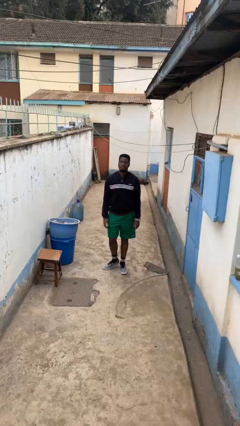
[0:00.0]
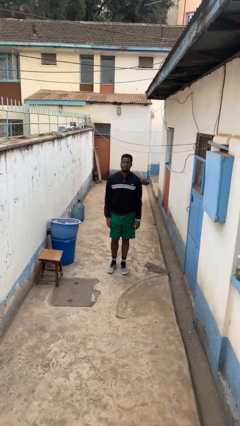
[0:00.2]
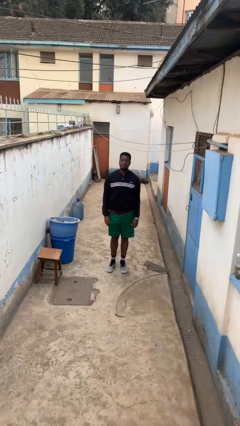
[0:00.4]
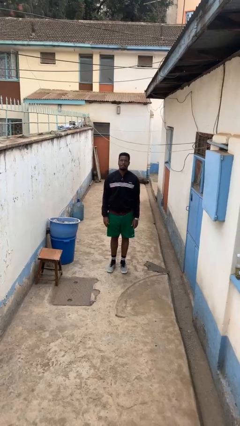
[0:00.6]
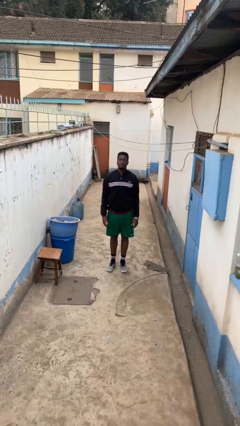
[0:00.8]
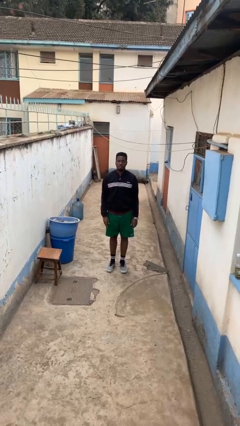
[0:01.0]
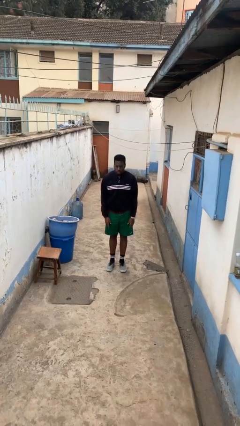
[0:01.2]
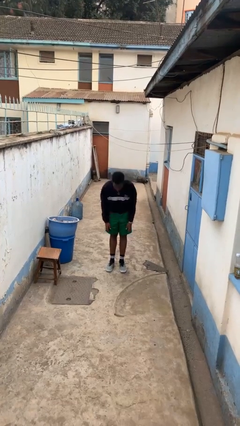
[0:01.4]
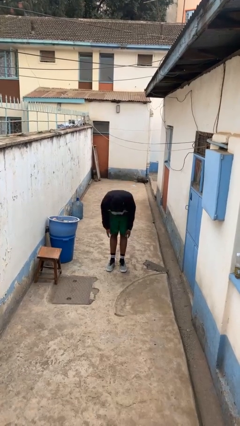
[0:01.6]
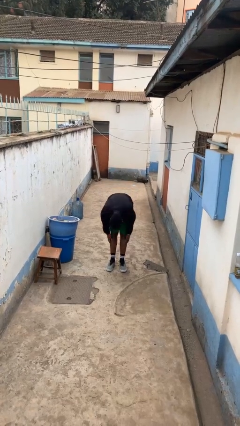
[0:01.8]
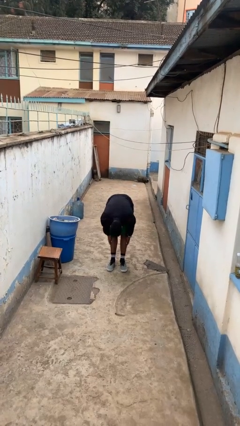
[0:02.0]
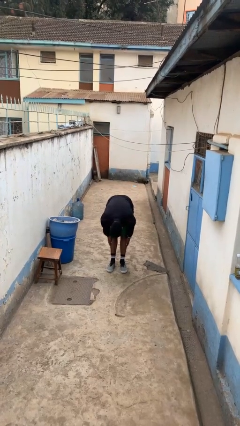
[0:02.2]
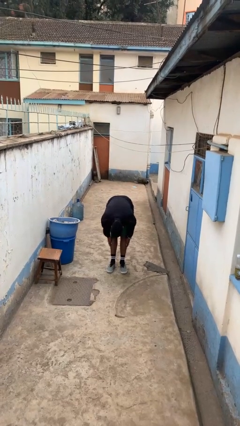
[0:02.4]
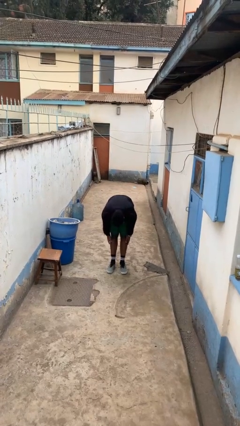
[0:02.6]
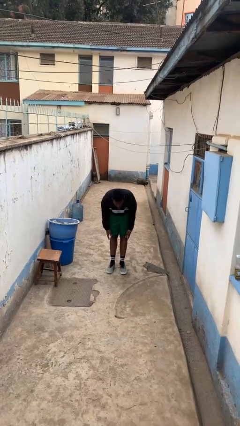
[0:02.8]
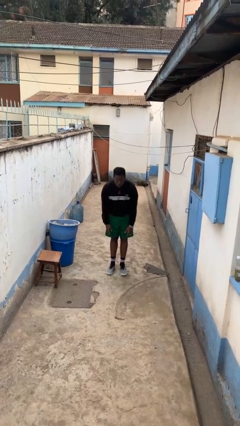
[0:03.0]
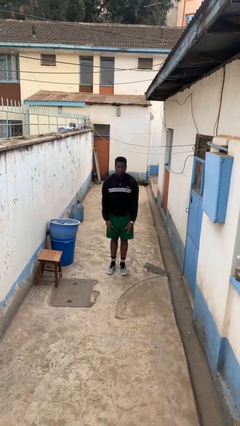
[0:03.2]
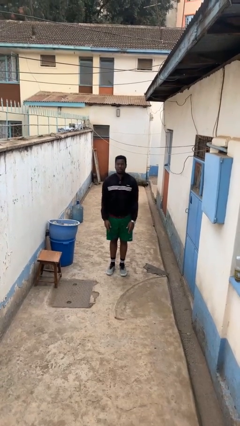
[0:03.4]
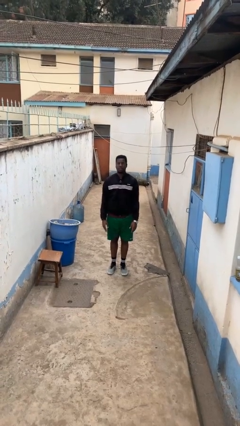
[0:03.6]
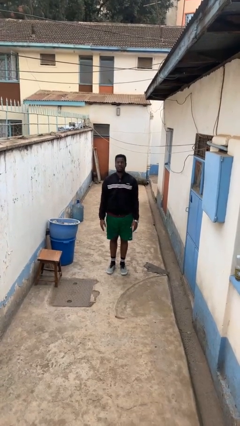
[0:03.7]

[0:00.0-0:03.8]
person bows

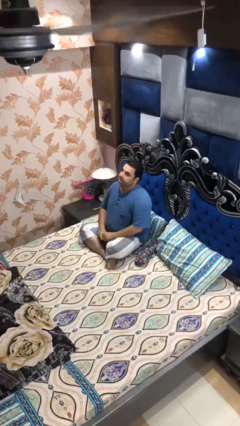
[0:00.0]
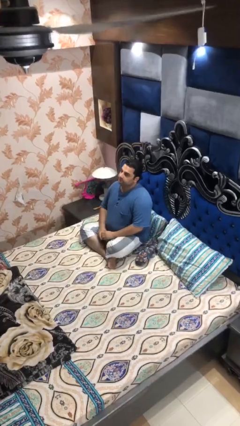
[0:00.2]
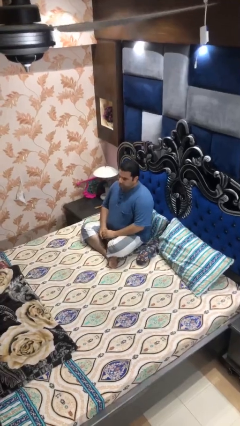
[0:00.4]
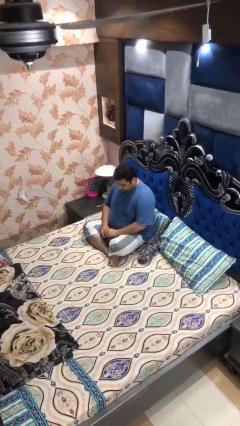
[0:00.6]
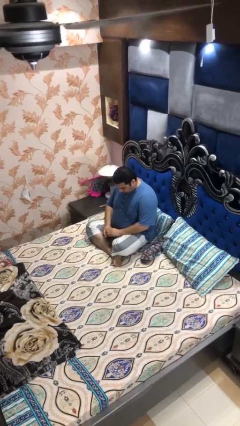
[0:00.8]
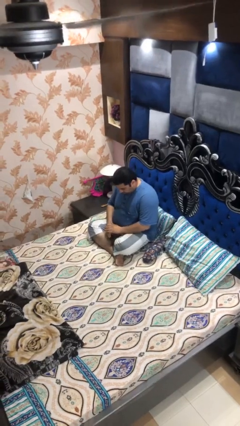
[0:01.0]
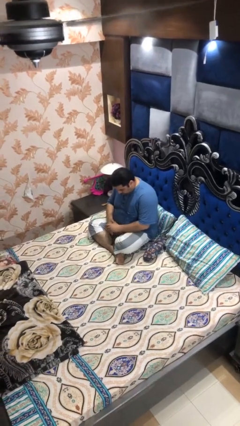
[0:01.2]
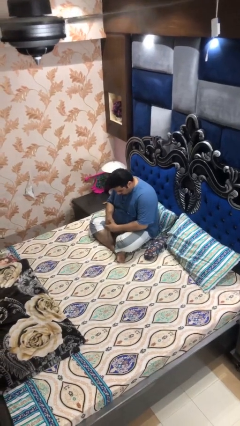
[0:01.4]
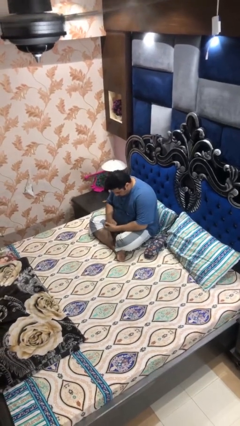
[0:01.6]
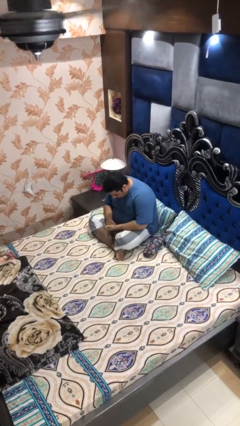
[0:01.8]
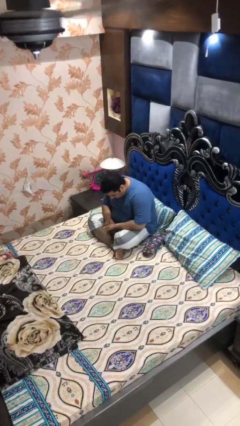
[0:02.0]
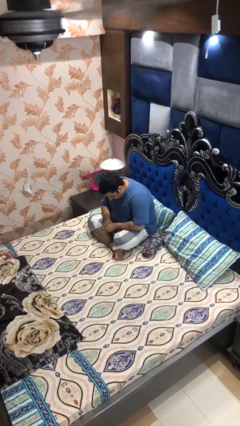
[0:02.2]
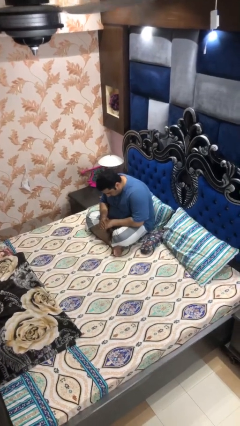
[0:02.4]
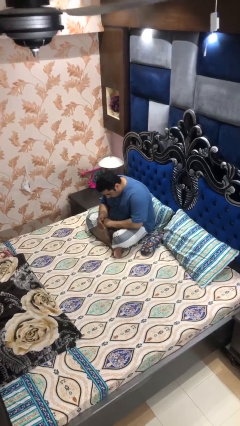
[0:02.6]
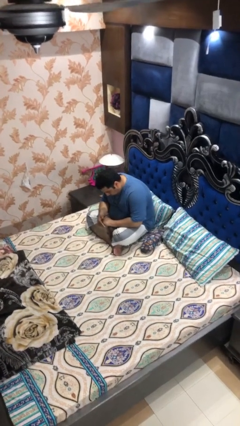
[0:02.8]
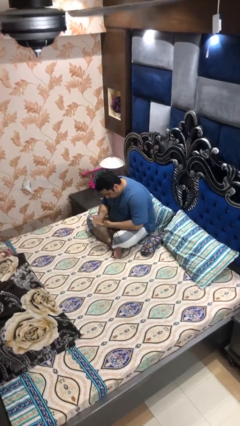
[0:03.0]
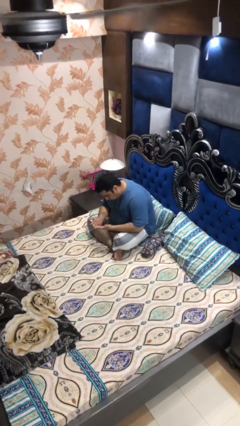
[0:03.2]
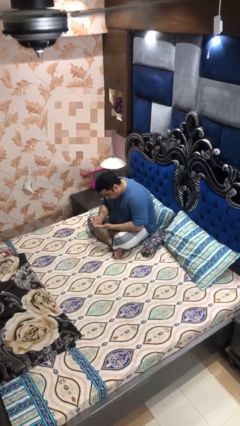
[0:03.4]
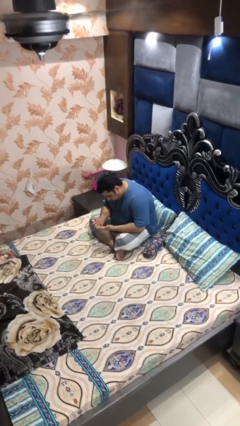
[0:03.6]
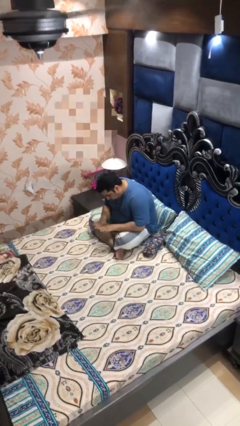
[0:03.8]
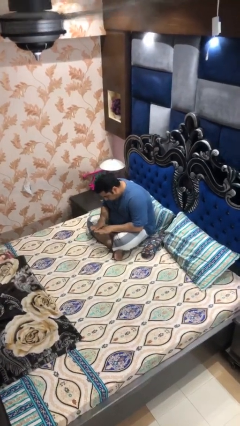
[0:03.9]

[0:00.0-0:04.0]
person looks at hands in lap

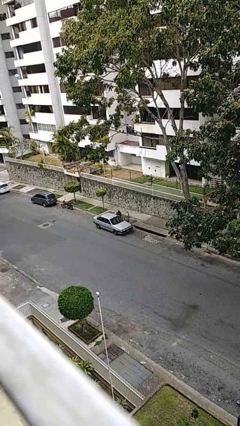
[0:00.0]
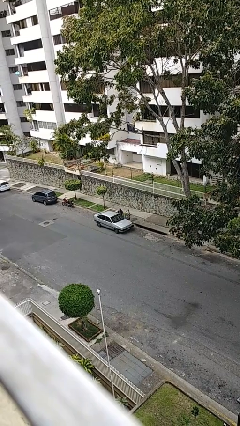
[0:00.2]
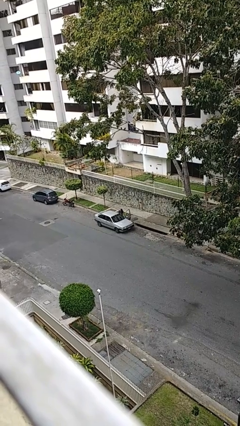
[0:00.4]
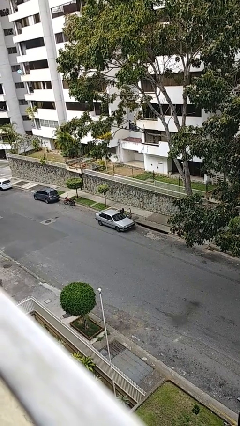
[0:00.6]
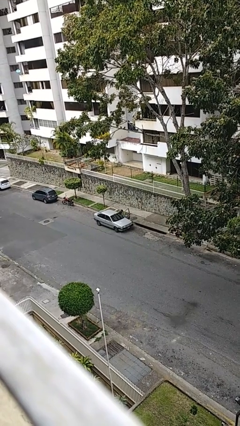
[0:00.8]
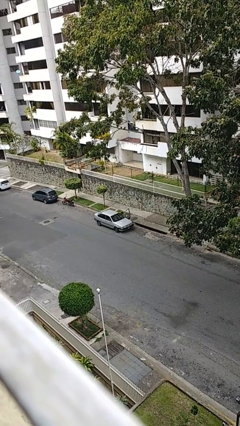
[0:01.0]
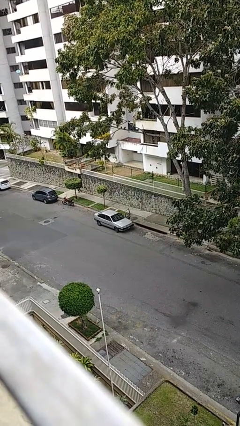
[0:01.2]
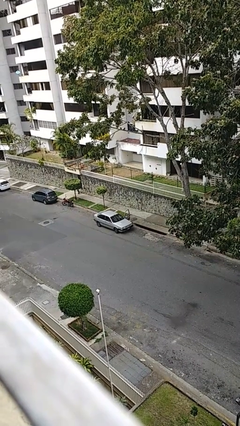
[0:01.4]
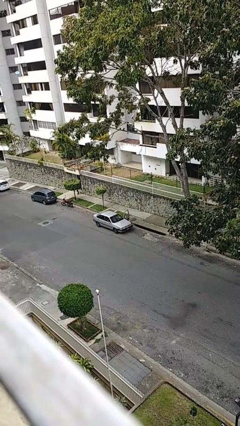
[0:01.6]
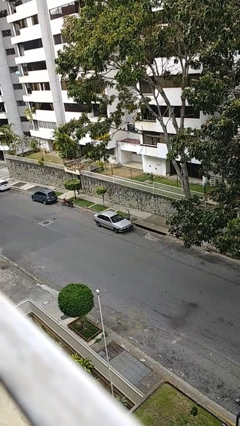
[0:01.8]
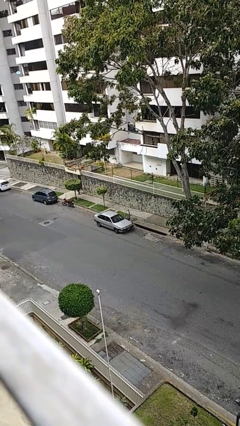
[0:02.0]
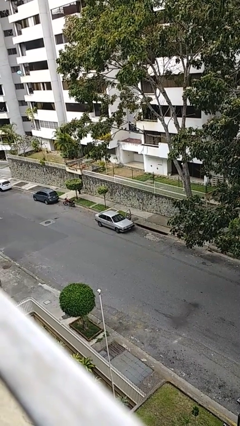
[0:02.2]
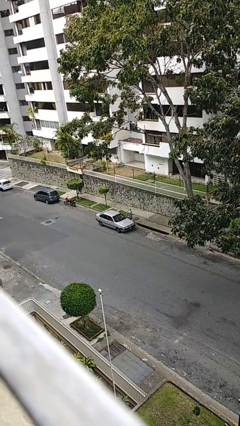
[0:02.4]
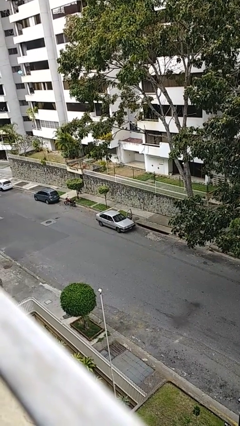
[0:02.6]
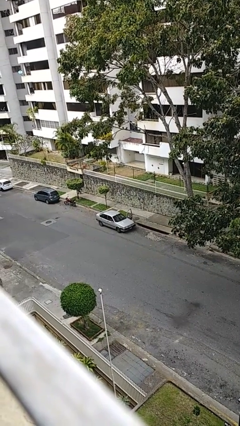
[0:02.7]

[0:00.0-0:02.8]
person enters car

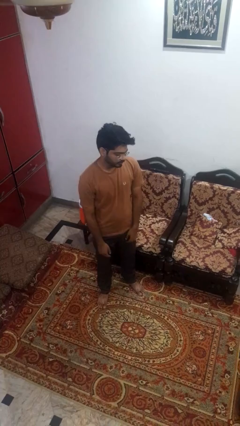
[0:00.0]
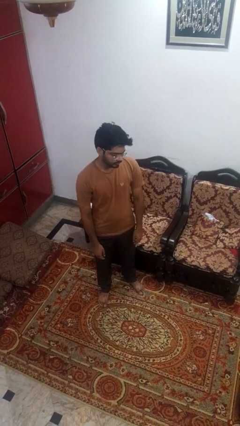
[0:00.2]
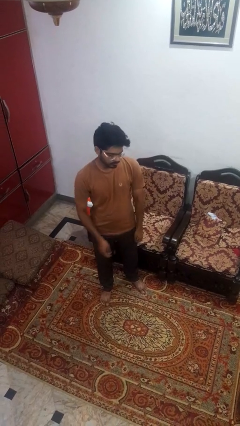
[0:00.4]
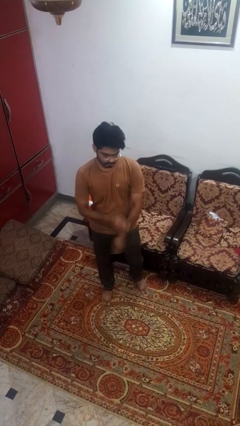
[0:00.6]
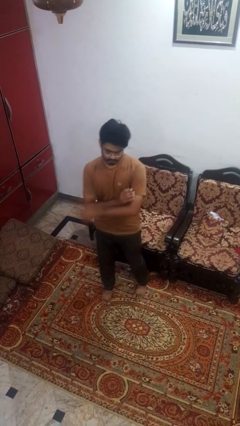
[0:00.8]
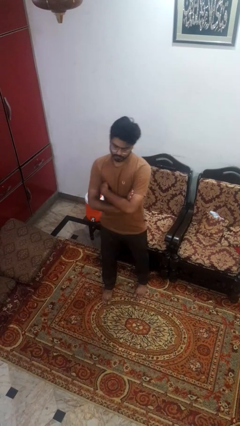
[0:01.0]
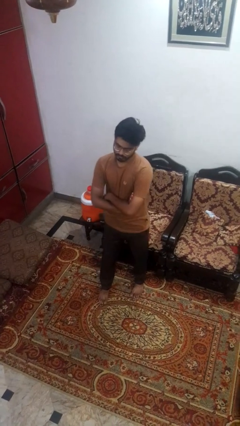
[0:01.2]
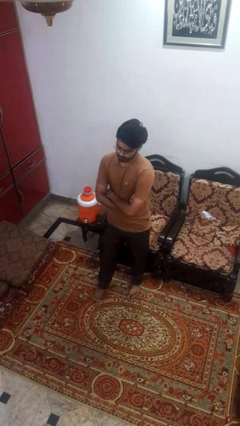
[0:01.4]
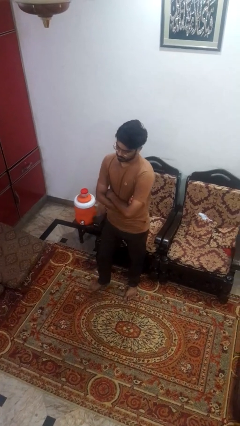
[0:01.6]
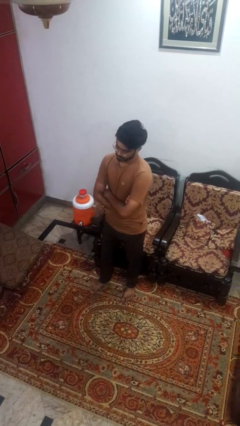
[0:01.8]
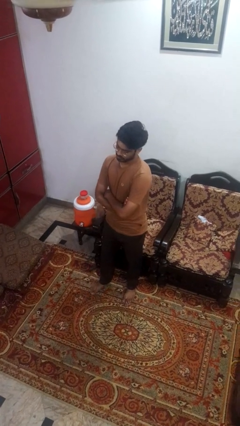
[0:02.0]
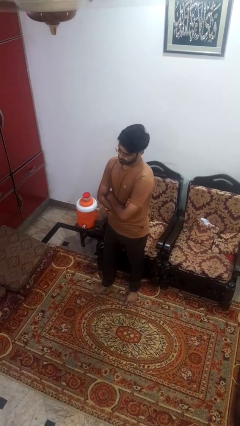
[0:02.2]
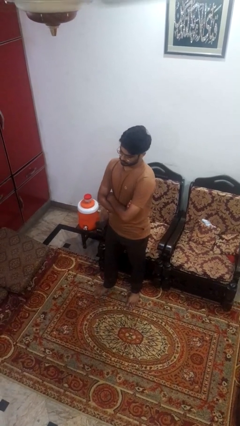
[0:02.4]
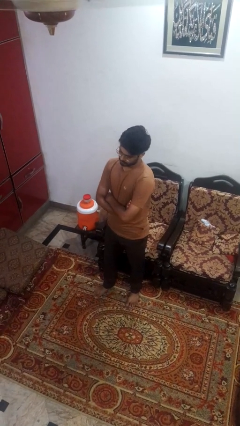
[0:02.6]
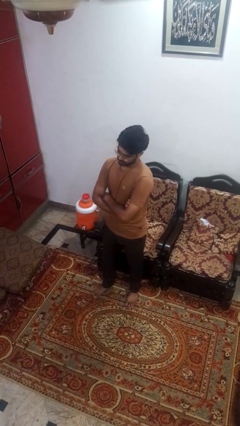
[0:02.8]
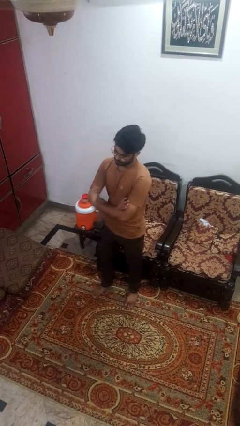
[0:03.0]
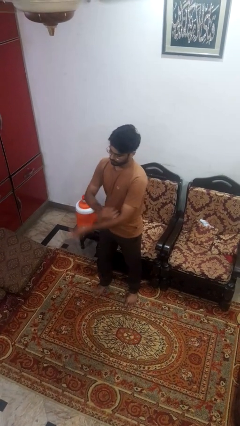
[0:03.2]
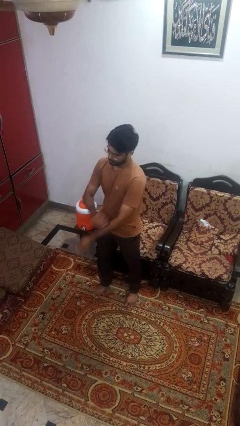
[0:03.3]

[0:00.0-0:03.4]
person crosses arms

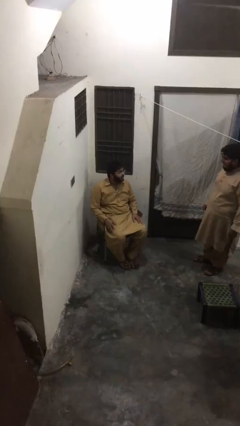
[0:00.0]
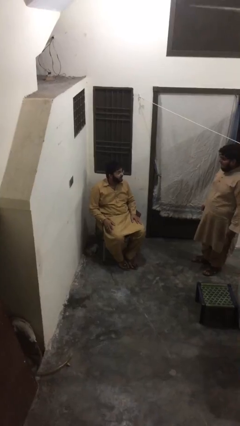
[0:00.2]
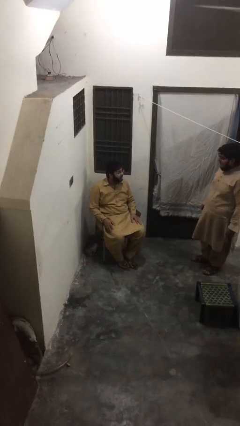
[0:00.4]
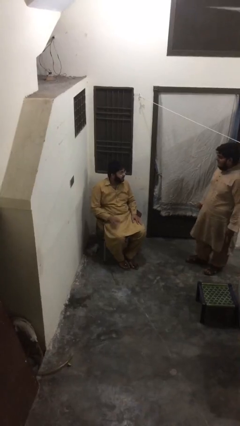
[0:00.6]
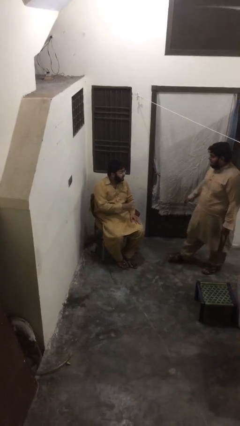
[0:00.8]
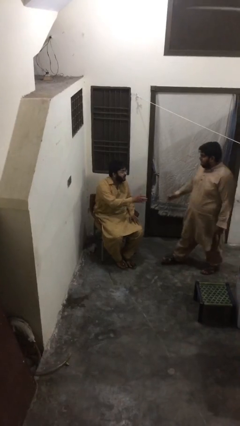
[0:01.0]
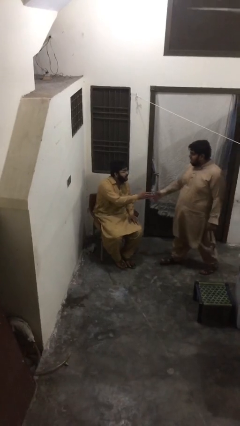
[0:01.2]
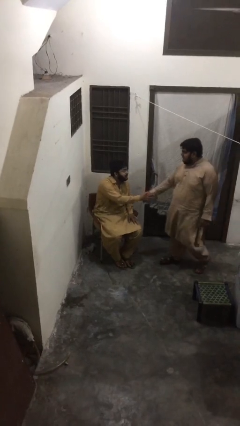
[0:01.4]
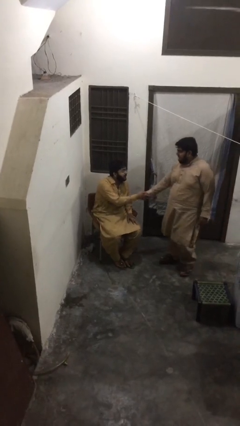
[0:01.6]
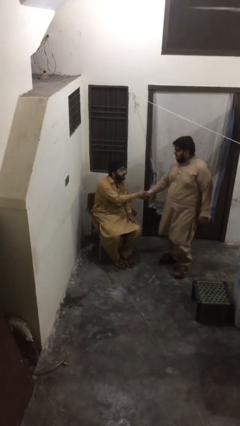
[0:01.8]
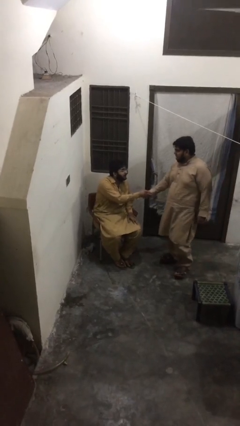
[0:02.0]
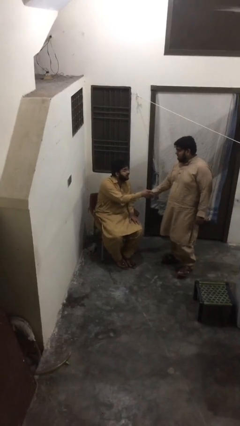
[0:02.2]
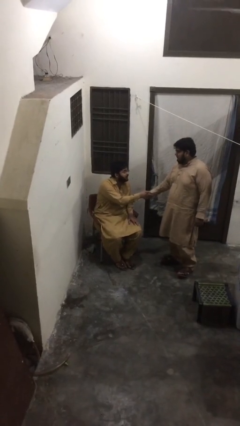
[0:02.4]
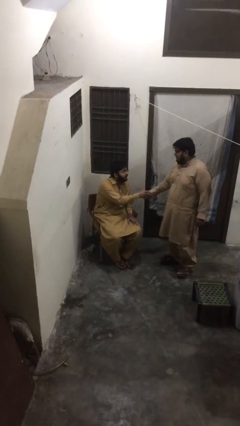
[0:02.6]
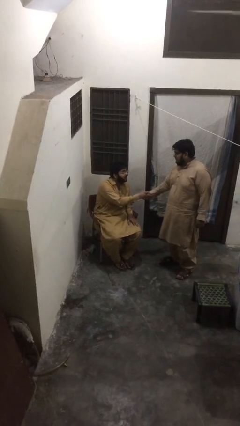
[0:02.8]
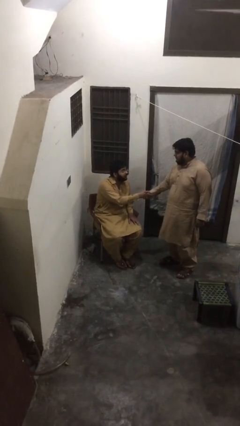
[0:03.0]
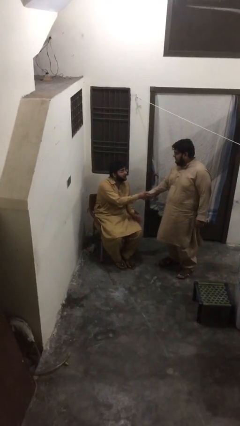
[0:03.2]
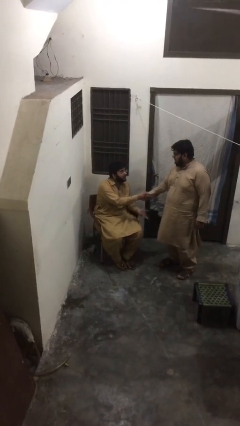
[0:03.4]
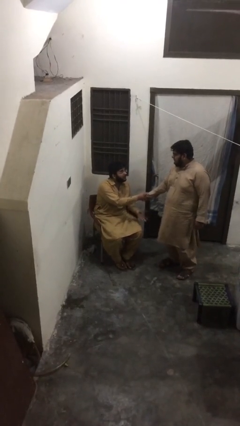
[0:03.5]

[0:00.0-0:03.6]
person shakes hand
